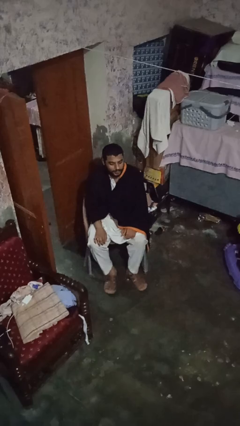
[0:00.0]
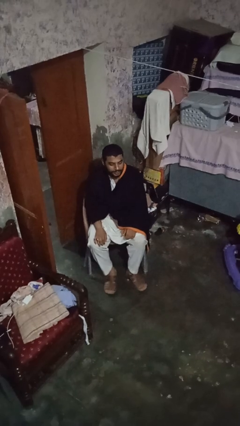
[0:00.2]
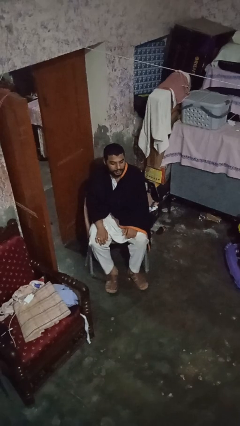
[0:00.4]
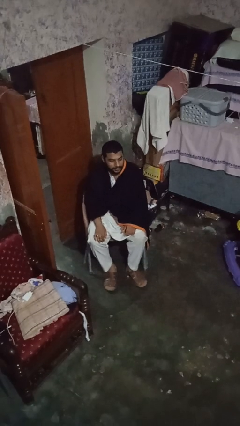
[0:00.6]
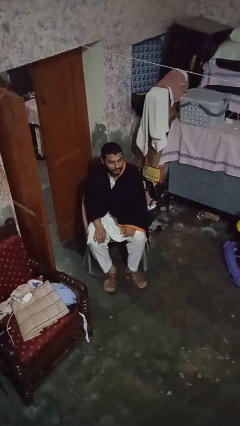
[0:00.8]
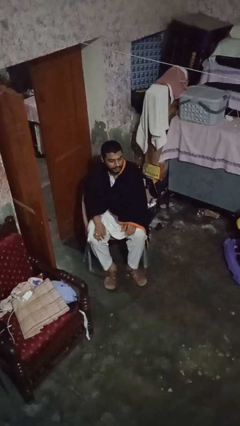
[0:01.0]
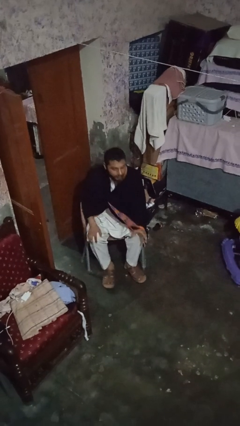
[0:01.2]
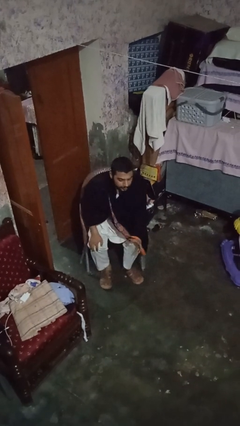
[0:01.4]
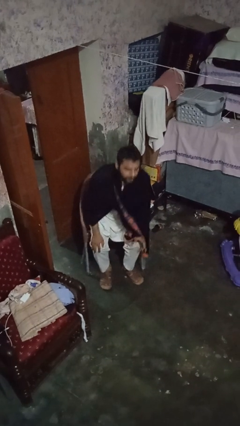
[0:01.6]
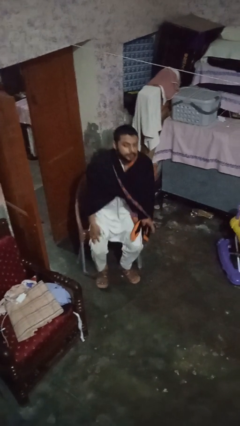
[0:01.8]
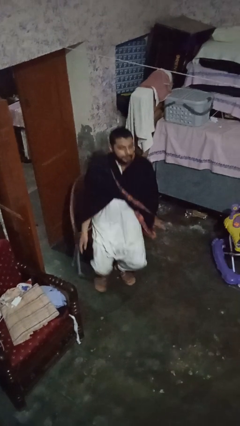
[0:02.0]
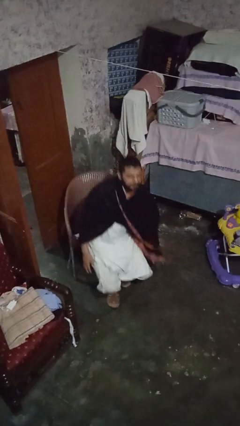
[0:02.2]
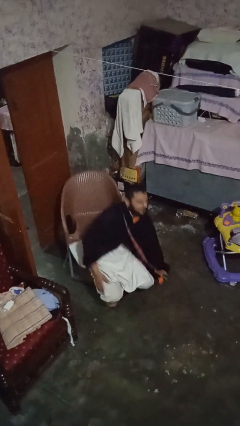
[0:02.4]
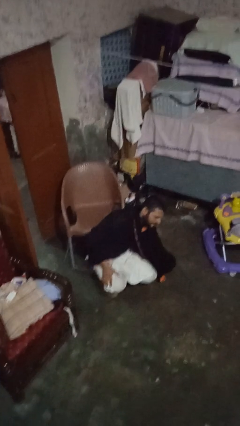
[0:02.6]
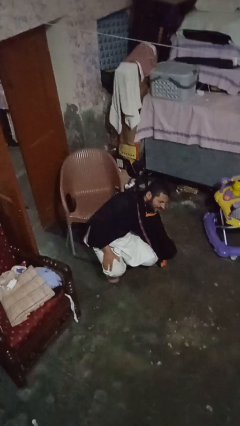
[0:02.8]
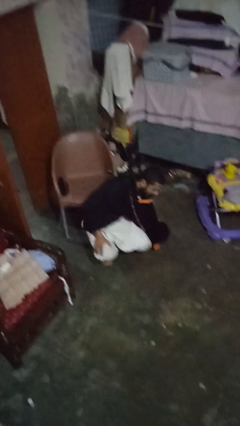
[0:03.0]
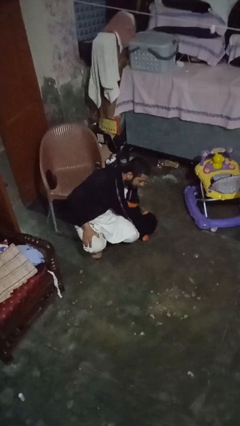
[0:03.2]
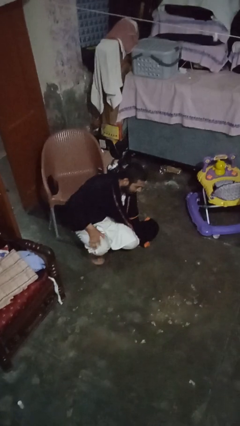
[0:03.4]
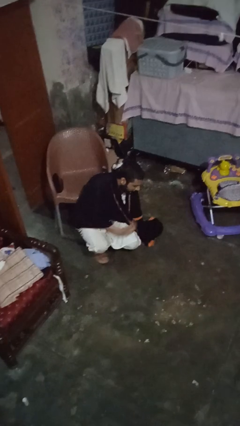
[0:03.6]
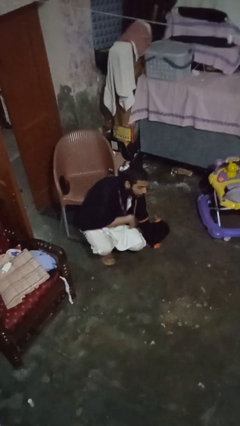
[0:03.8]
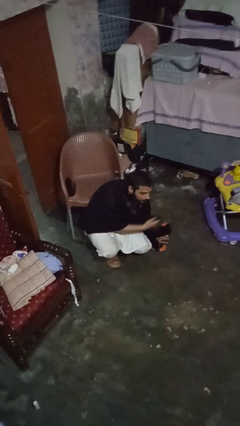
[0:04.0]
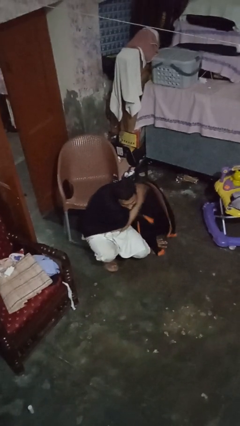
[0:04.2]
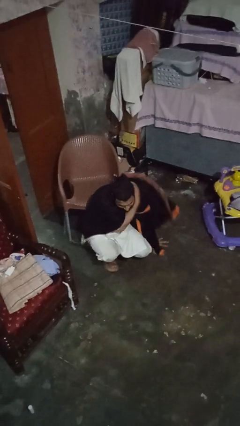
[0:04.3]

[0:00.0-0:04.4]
person falls from chair

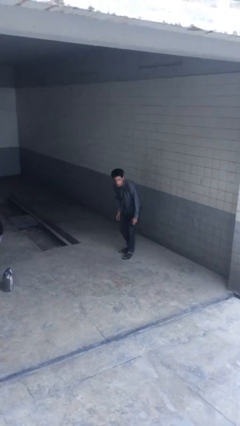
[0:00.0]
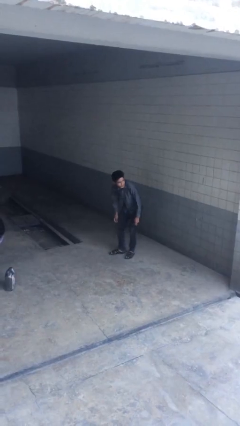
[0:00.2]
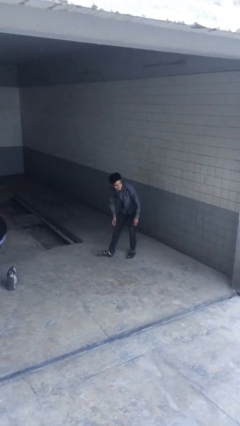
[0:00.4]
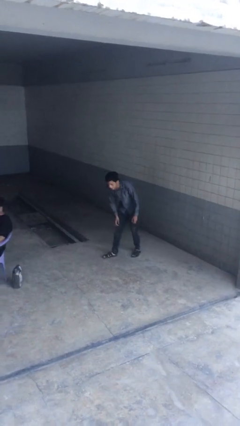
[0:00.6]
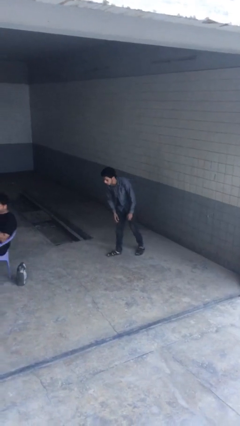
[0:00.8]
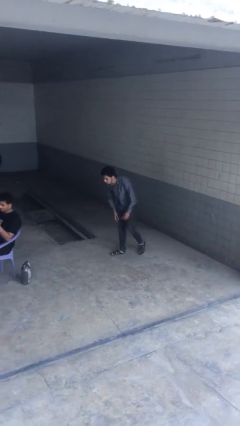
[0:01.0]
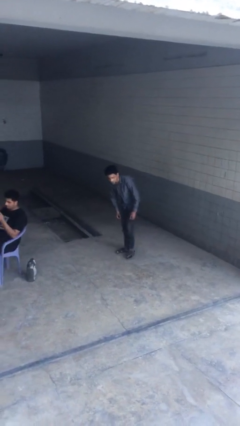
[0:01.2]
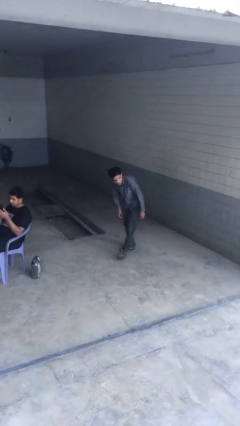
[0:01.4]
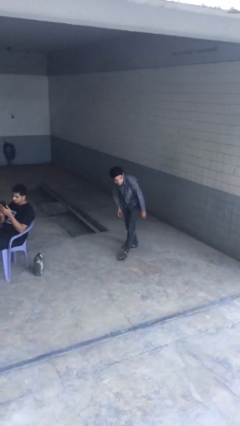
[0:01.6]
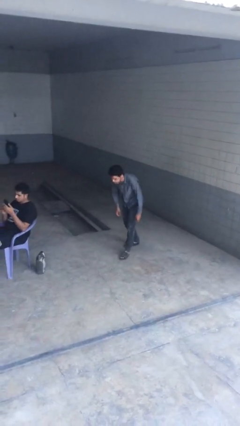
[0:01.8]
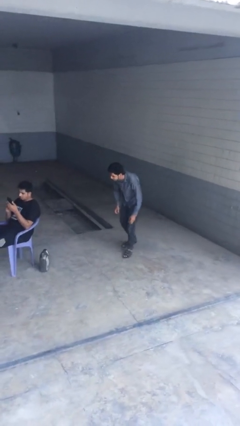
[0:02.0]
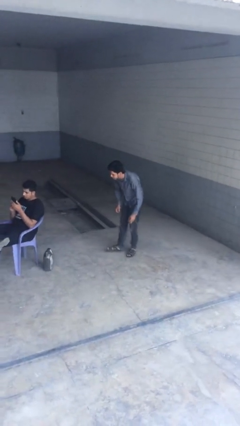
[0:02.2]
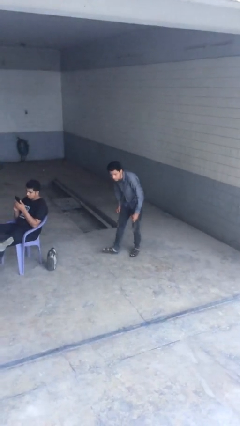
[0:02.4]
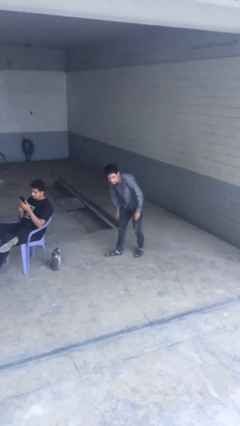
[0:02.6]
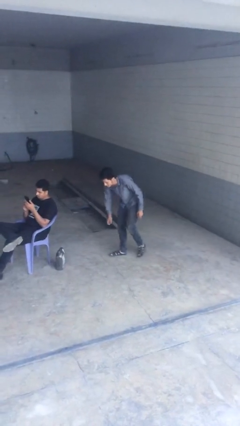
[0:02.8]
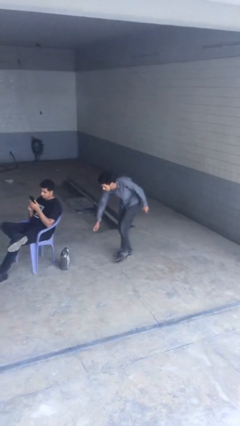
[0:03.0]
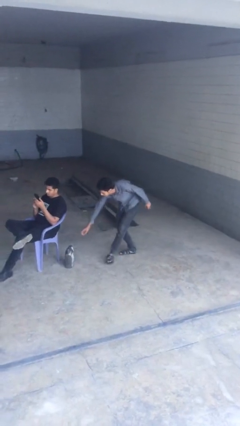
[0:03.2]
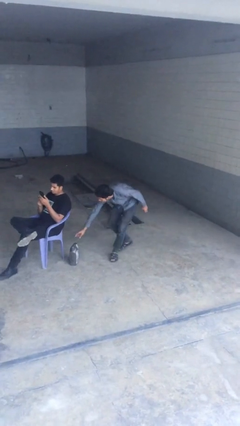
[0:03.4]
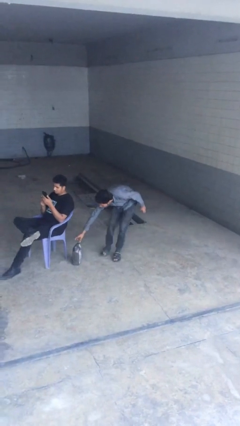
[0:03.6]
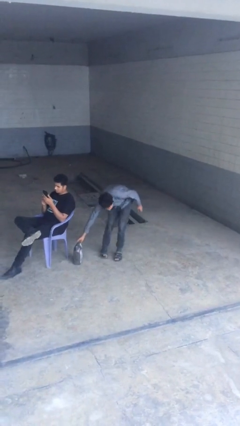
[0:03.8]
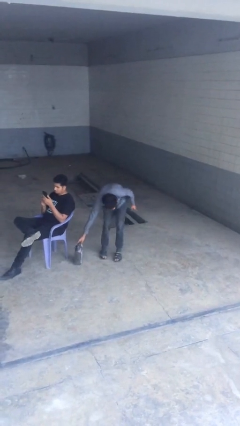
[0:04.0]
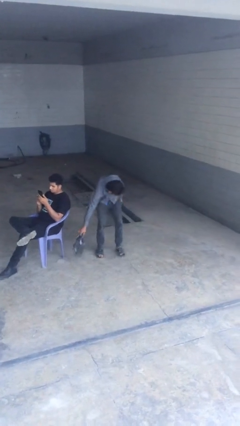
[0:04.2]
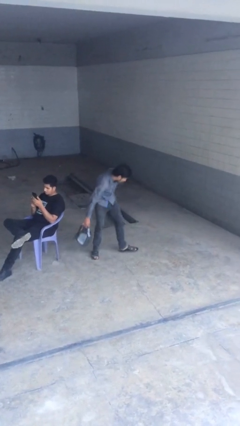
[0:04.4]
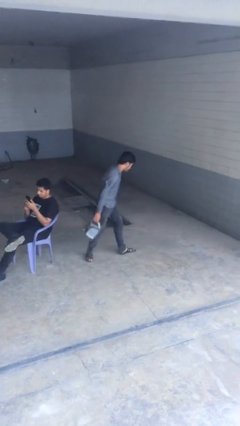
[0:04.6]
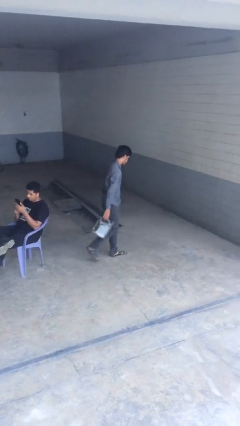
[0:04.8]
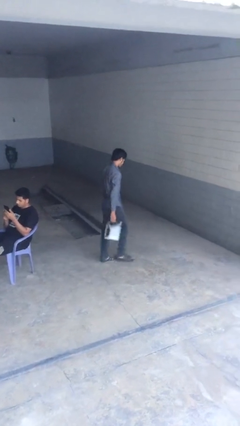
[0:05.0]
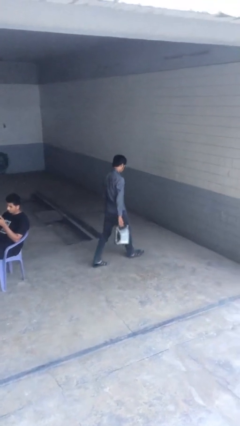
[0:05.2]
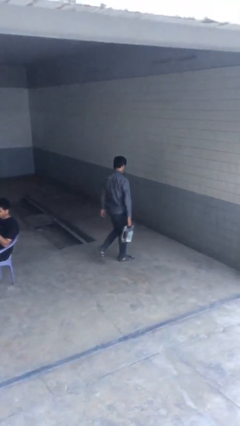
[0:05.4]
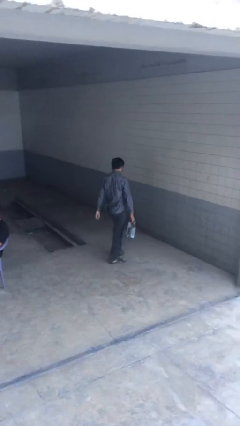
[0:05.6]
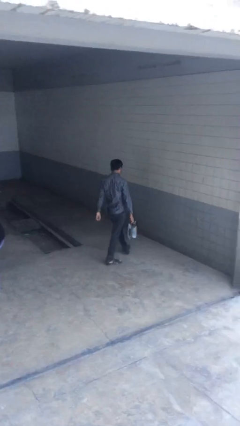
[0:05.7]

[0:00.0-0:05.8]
person steals object from person

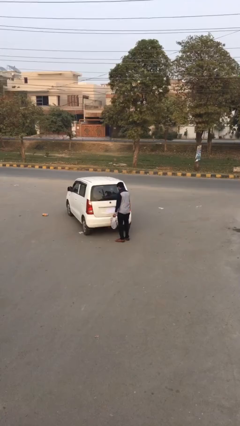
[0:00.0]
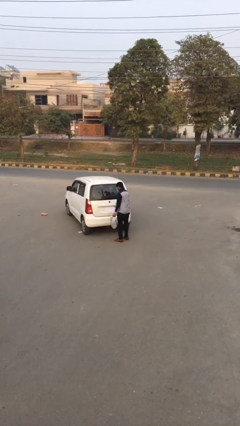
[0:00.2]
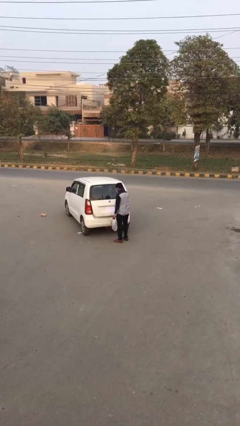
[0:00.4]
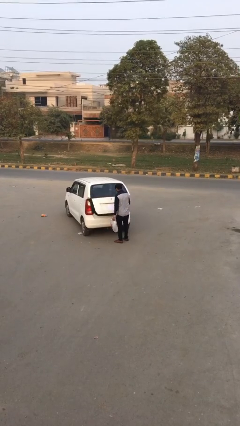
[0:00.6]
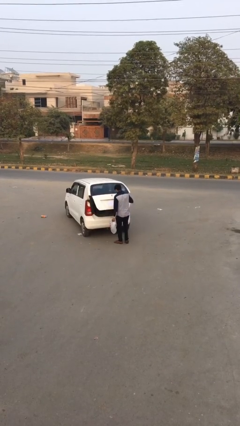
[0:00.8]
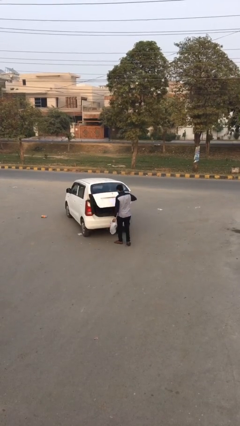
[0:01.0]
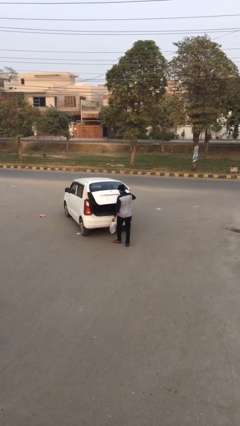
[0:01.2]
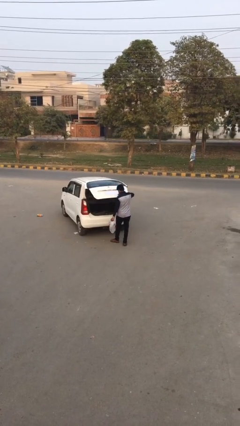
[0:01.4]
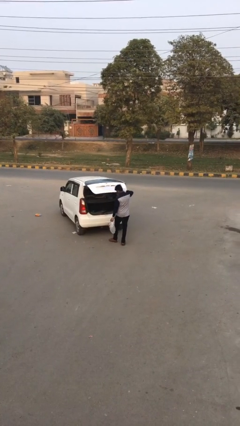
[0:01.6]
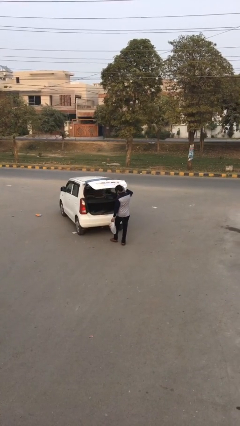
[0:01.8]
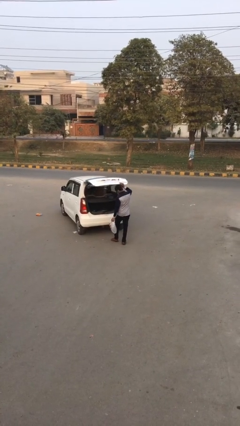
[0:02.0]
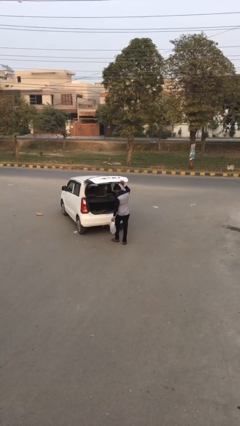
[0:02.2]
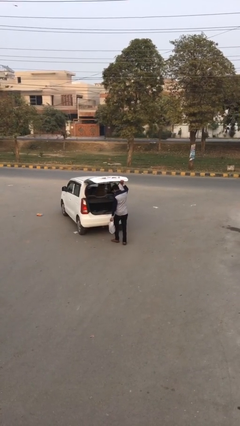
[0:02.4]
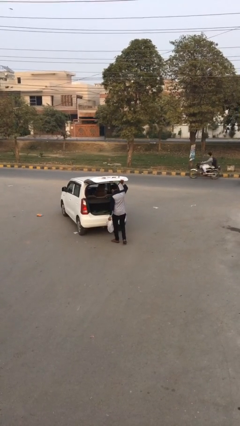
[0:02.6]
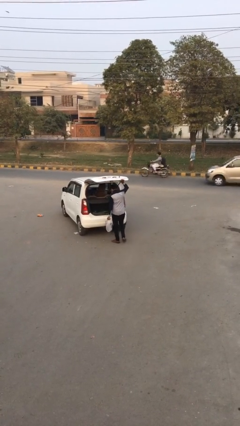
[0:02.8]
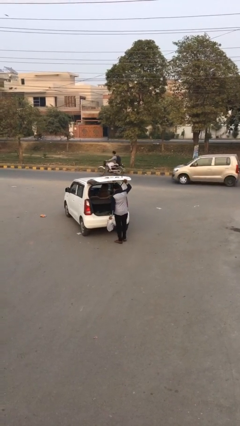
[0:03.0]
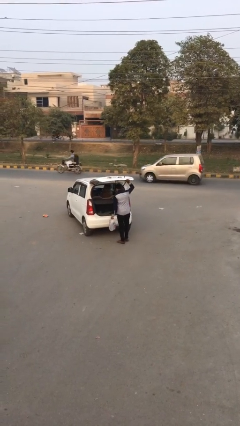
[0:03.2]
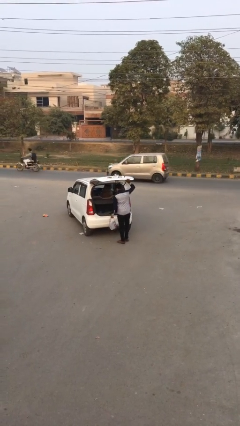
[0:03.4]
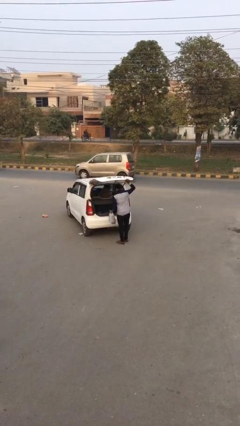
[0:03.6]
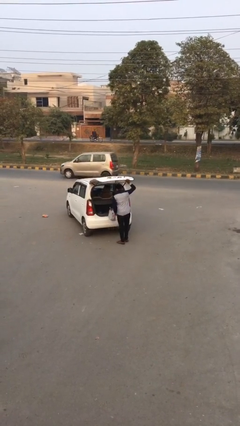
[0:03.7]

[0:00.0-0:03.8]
person opens car trunk

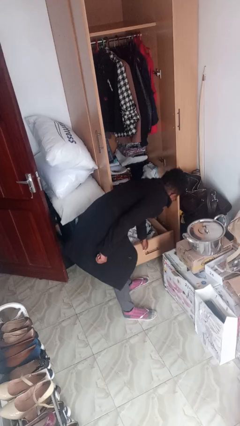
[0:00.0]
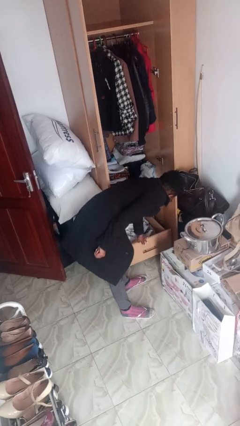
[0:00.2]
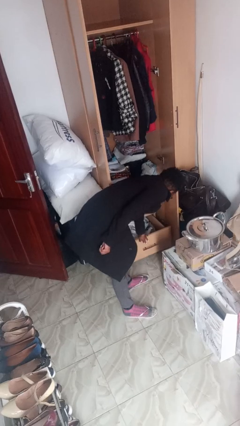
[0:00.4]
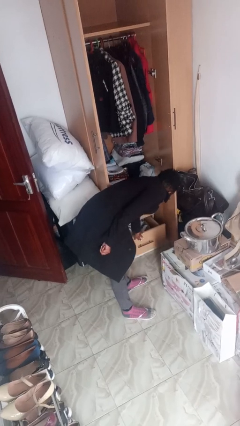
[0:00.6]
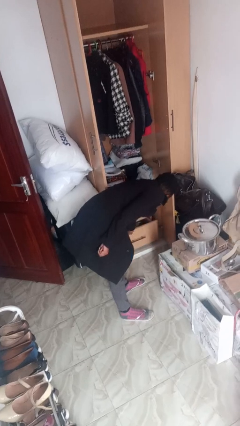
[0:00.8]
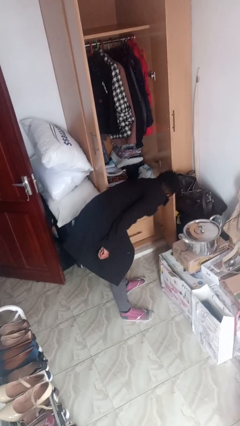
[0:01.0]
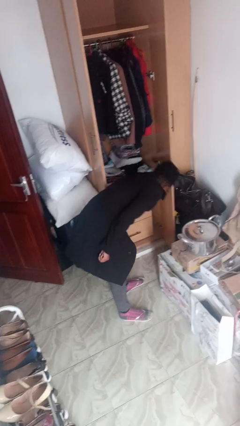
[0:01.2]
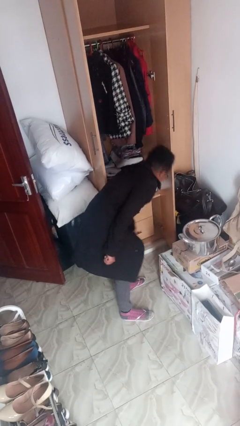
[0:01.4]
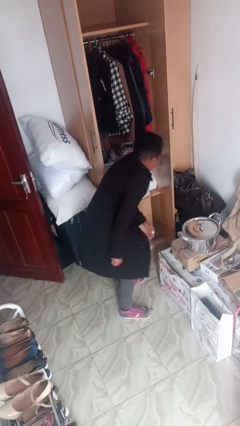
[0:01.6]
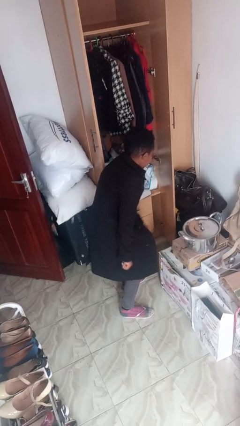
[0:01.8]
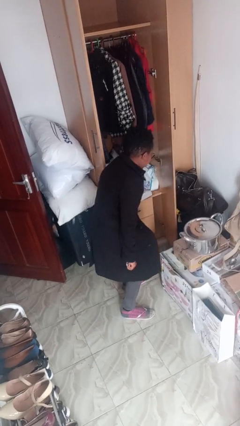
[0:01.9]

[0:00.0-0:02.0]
person closes dresser drawer

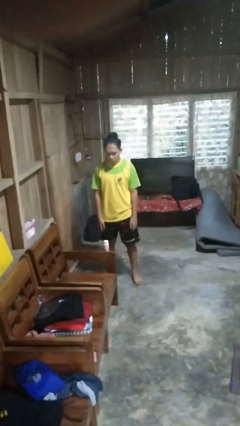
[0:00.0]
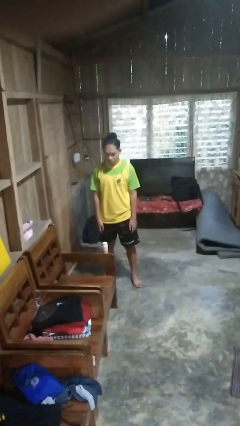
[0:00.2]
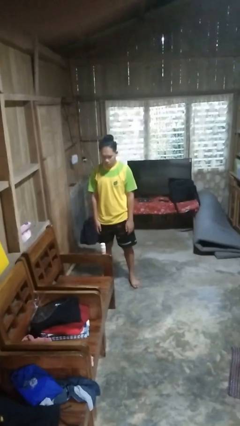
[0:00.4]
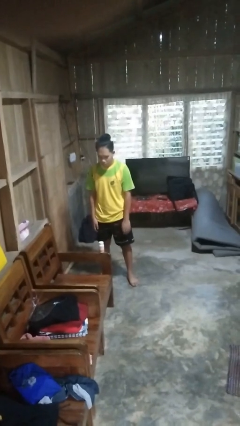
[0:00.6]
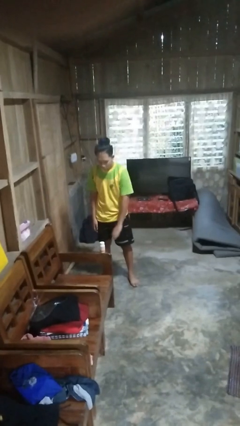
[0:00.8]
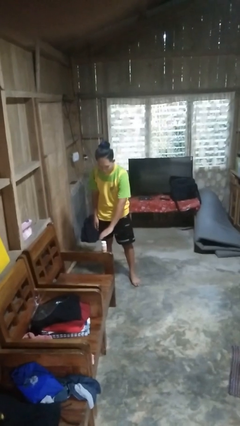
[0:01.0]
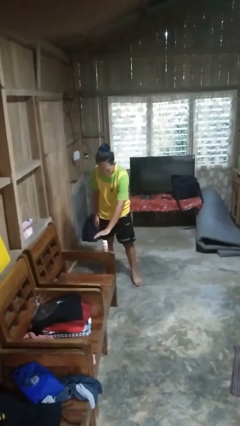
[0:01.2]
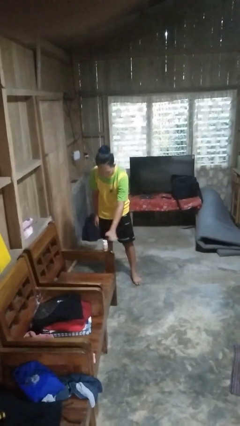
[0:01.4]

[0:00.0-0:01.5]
person waves hand over object

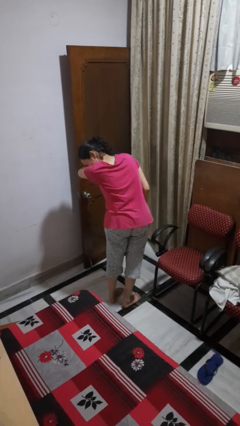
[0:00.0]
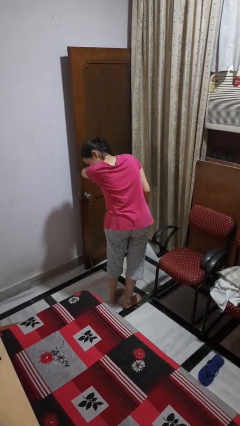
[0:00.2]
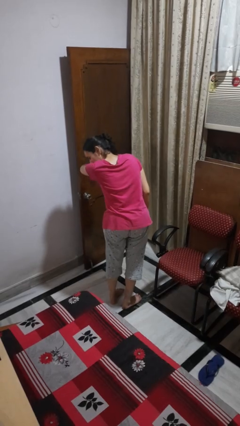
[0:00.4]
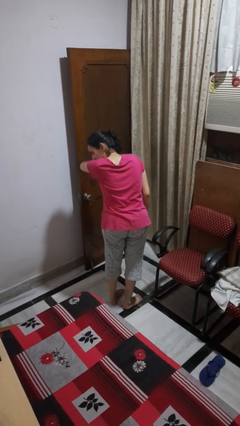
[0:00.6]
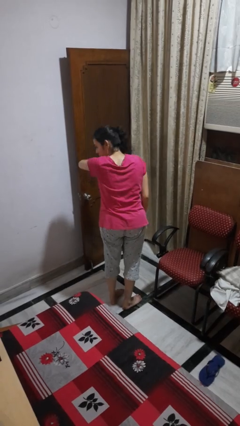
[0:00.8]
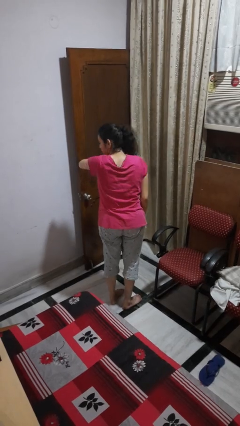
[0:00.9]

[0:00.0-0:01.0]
person sneezes into arm
